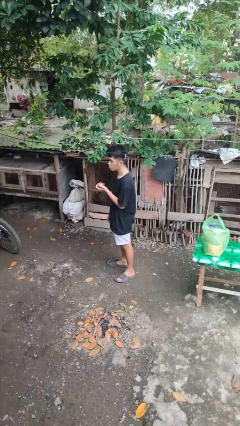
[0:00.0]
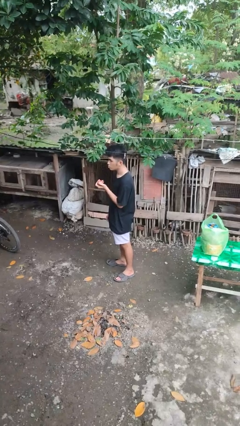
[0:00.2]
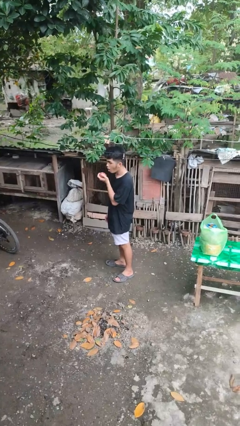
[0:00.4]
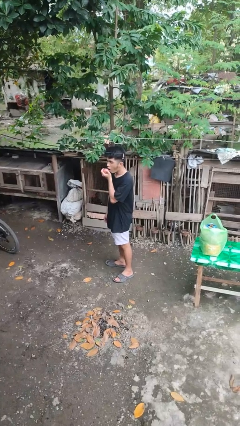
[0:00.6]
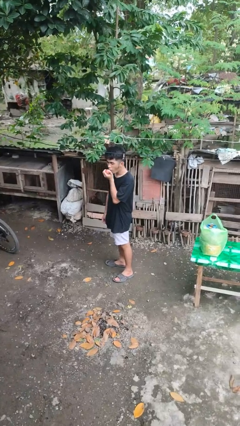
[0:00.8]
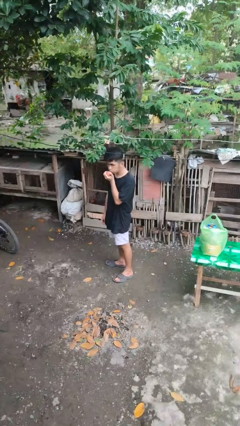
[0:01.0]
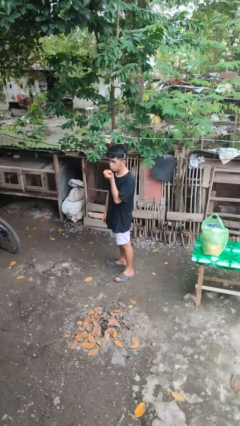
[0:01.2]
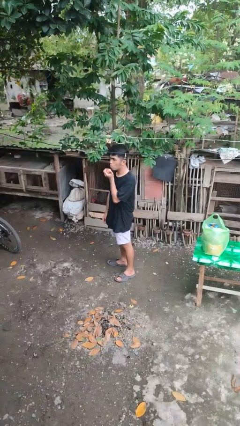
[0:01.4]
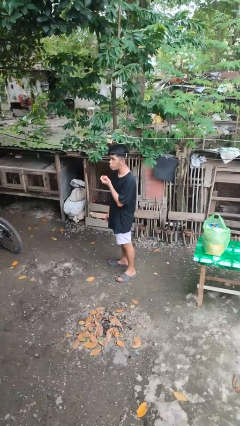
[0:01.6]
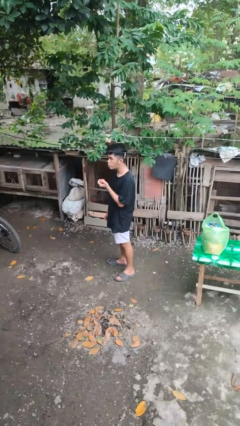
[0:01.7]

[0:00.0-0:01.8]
person eats apple

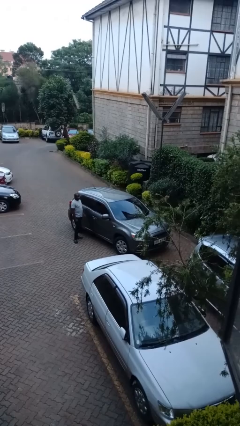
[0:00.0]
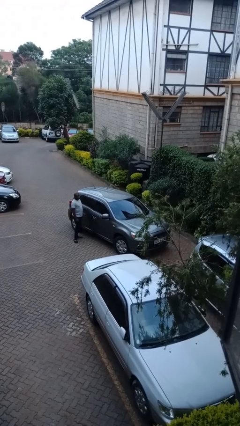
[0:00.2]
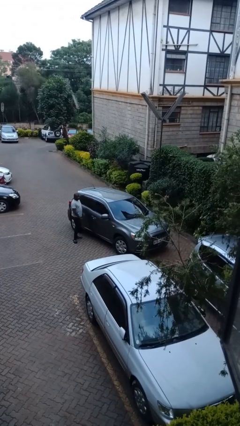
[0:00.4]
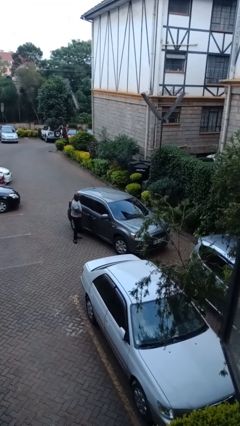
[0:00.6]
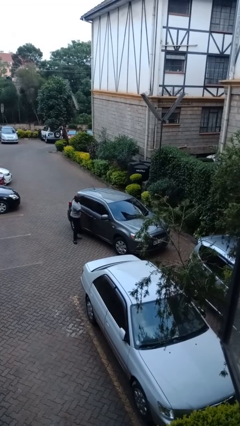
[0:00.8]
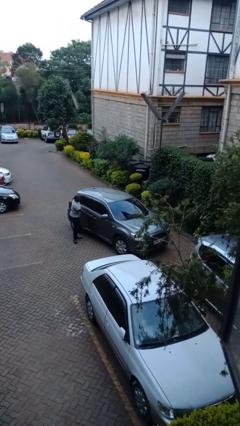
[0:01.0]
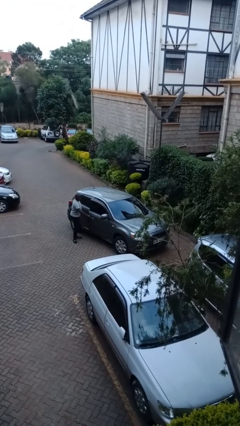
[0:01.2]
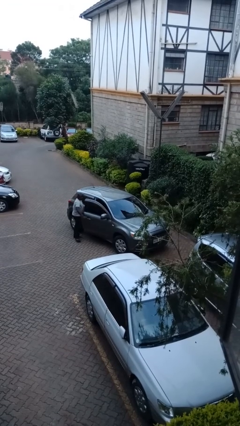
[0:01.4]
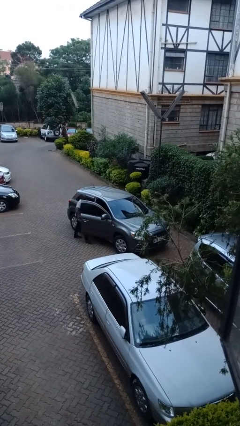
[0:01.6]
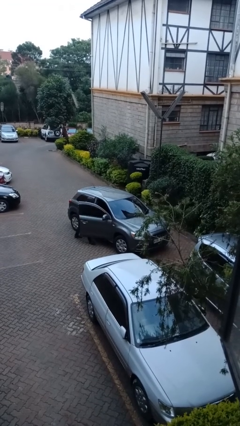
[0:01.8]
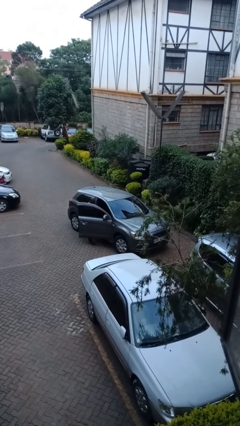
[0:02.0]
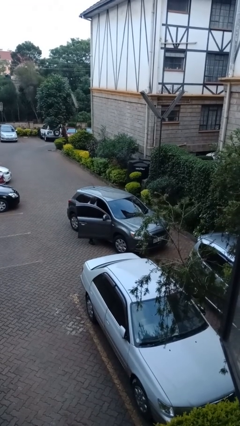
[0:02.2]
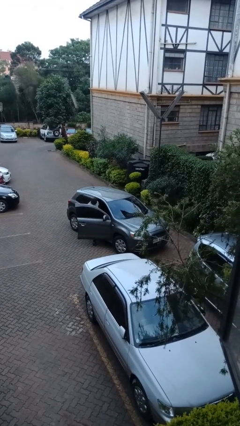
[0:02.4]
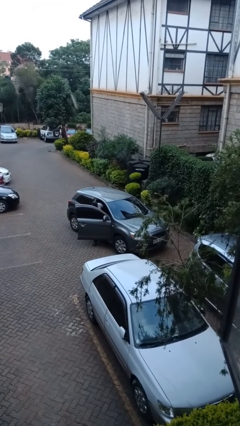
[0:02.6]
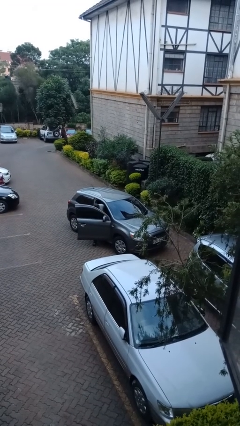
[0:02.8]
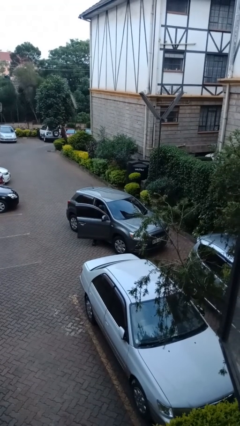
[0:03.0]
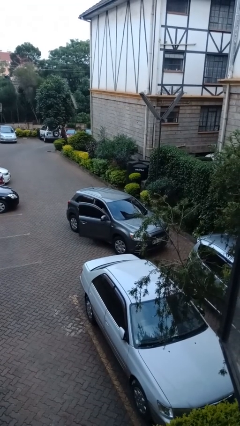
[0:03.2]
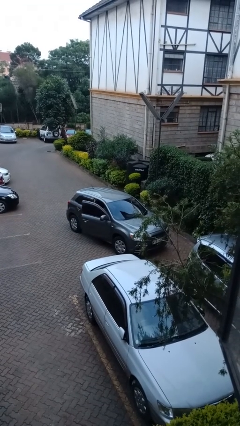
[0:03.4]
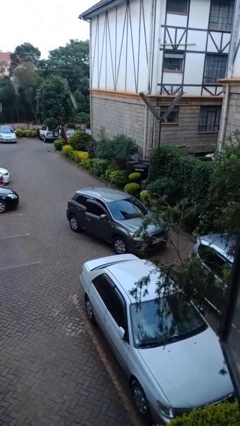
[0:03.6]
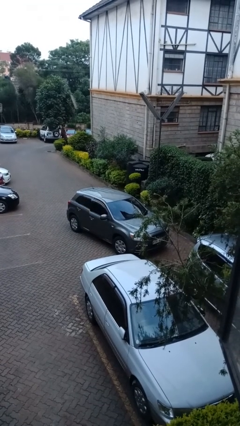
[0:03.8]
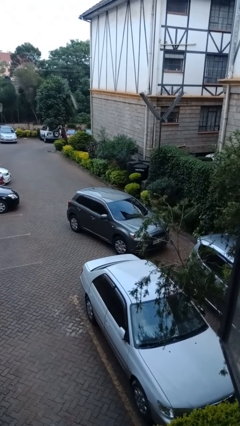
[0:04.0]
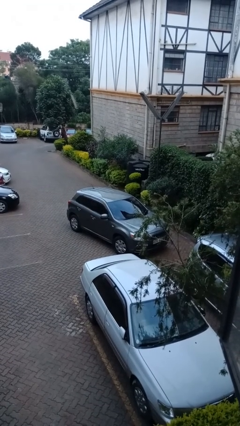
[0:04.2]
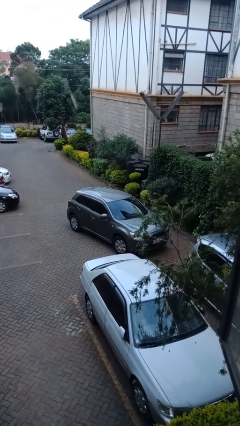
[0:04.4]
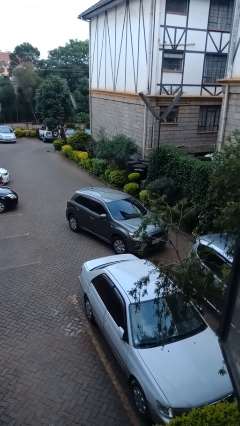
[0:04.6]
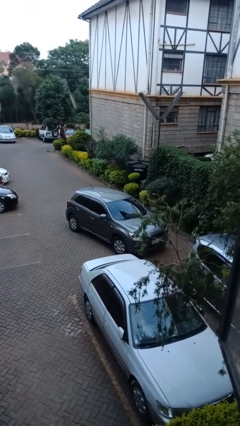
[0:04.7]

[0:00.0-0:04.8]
car picks up person

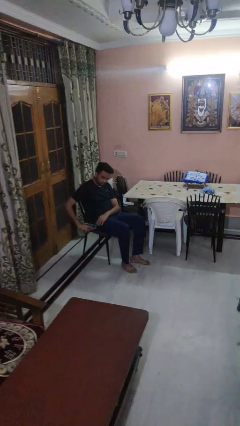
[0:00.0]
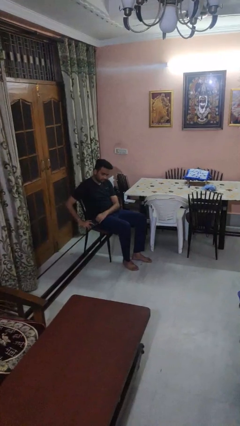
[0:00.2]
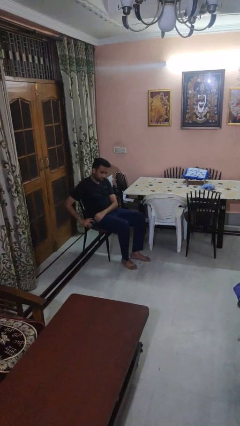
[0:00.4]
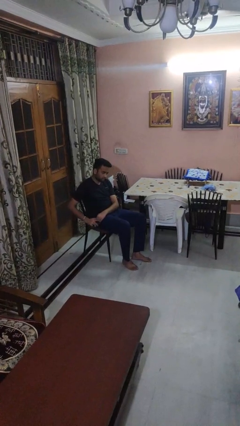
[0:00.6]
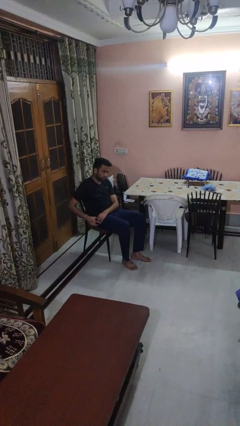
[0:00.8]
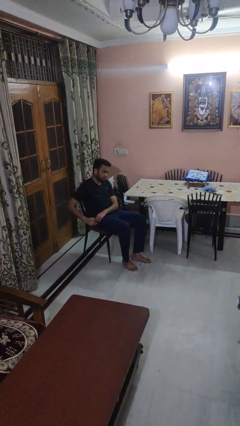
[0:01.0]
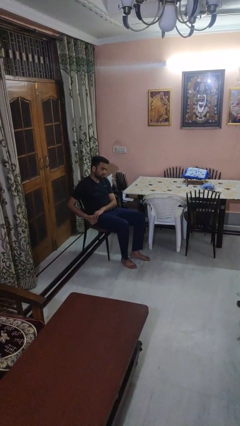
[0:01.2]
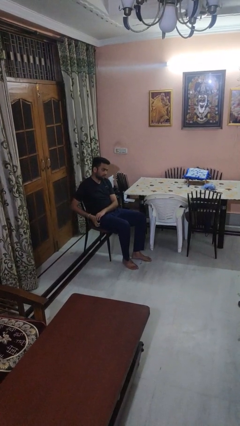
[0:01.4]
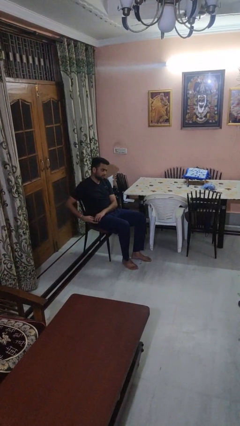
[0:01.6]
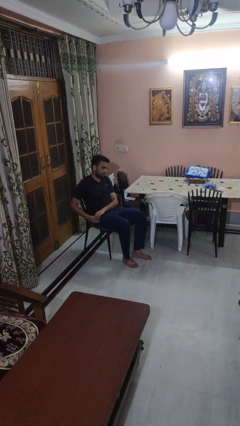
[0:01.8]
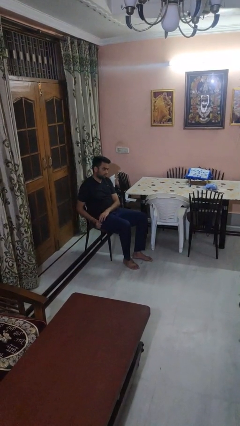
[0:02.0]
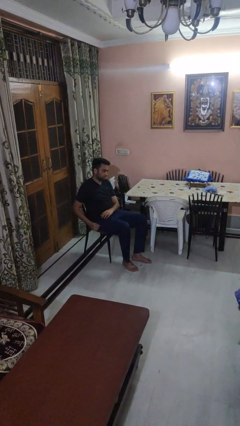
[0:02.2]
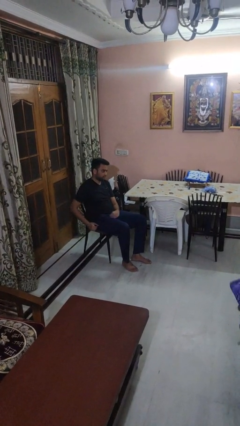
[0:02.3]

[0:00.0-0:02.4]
person puts phone into pocket

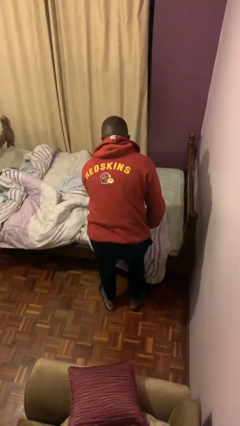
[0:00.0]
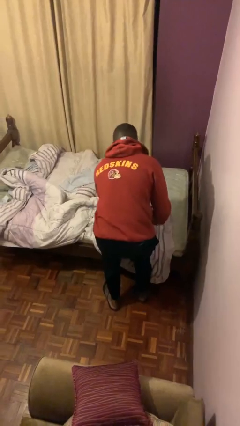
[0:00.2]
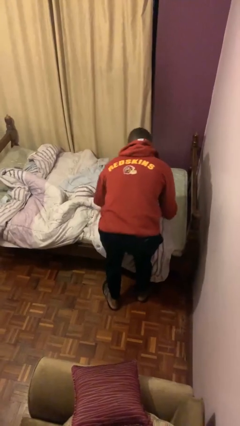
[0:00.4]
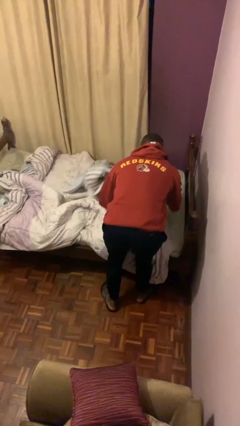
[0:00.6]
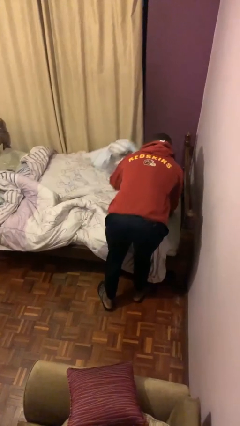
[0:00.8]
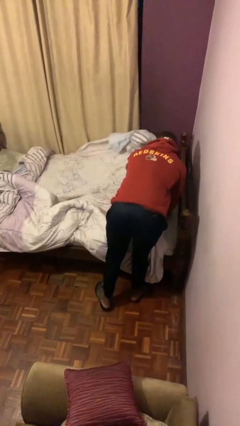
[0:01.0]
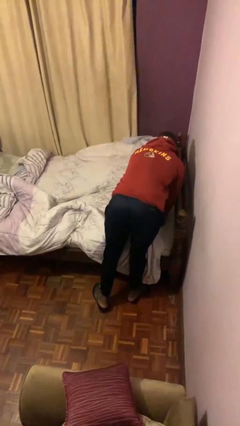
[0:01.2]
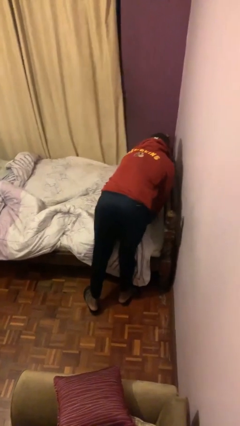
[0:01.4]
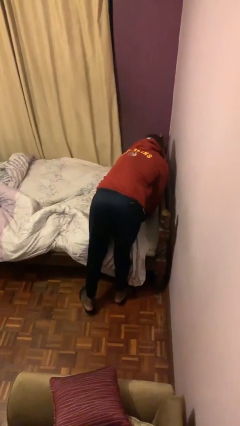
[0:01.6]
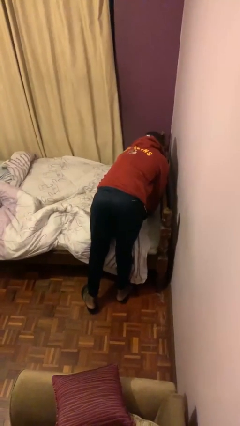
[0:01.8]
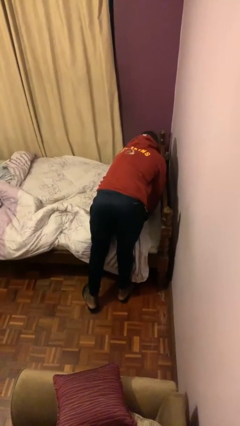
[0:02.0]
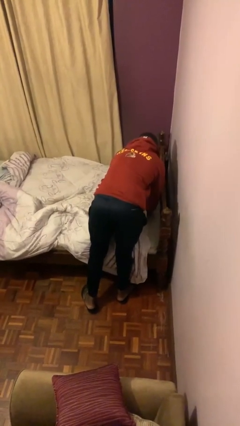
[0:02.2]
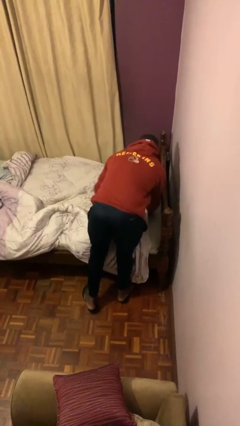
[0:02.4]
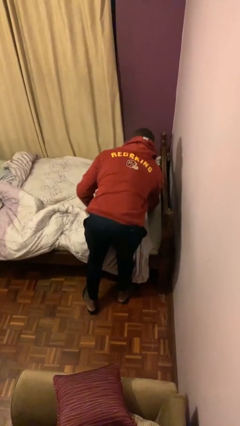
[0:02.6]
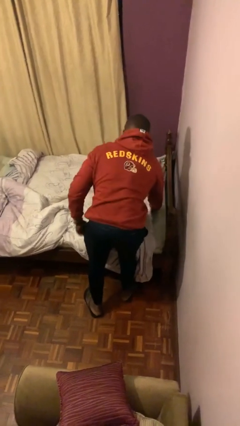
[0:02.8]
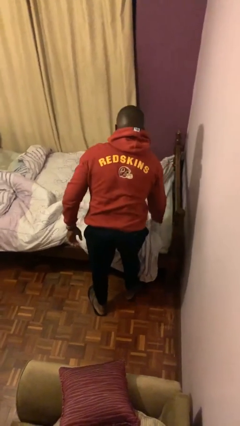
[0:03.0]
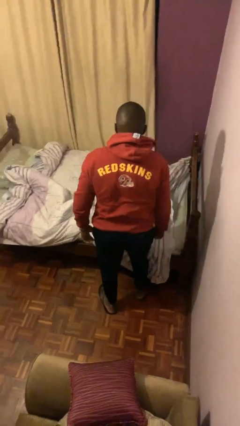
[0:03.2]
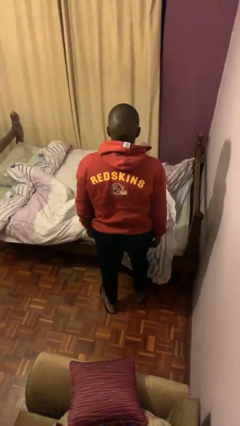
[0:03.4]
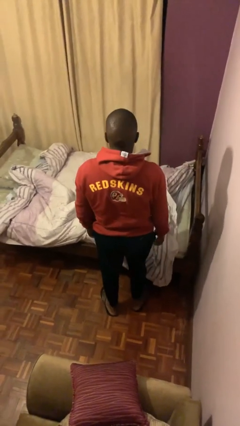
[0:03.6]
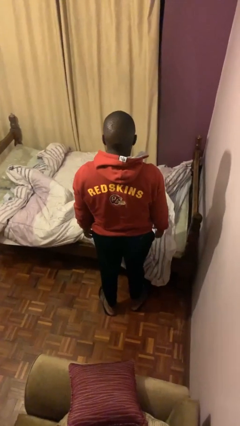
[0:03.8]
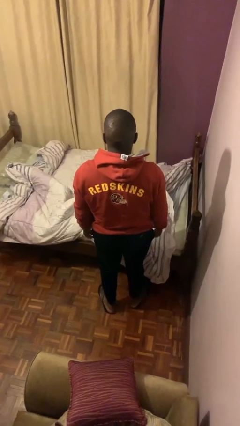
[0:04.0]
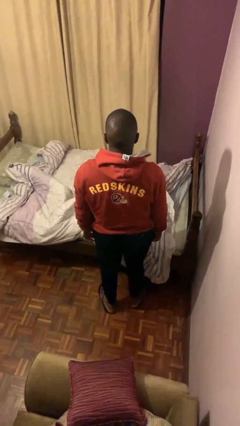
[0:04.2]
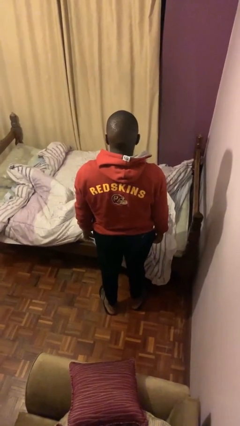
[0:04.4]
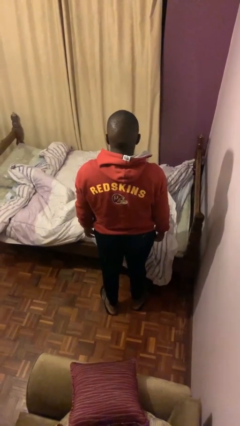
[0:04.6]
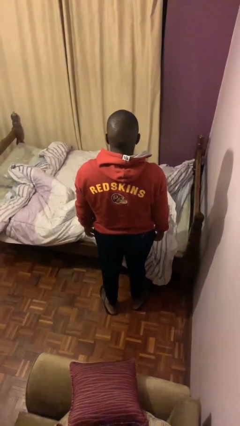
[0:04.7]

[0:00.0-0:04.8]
person makes bed

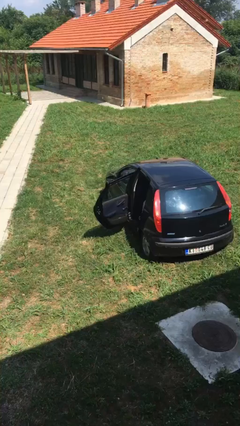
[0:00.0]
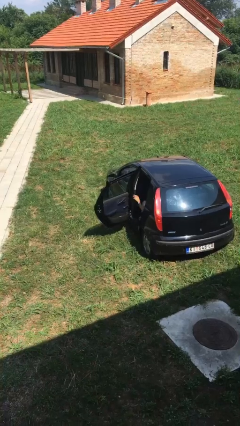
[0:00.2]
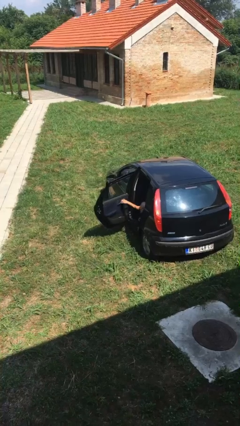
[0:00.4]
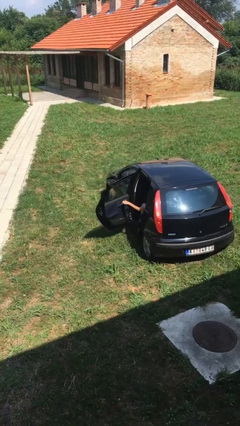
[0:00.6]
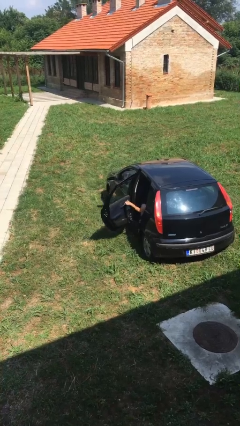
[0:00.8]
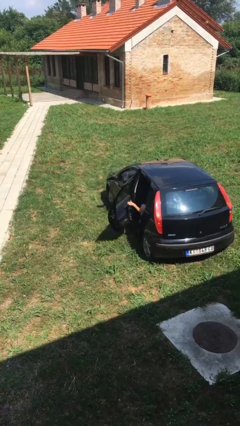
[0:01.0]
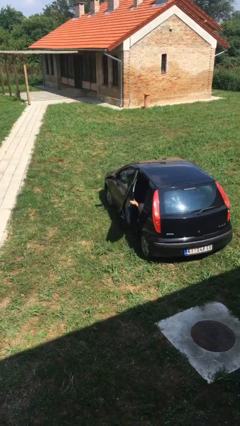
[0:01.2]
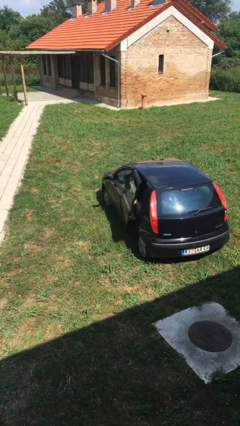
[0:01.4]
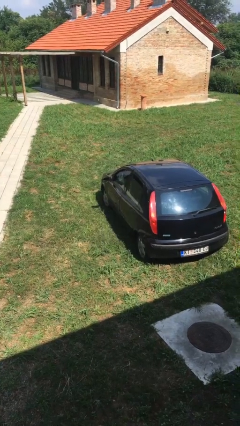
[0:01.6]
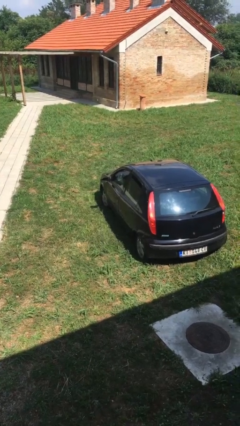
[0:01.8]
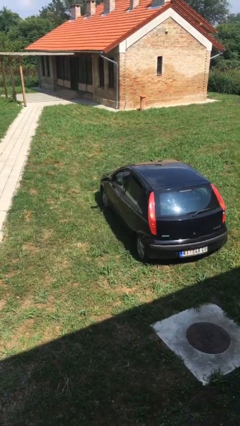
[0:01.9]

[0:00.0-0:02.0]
person closes car door

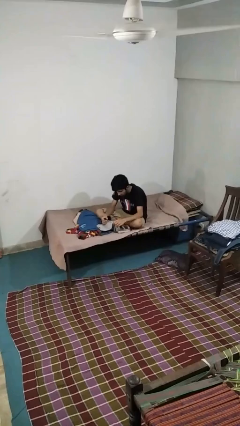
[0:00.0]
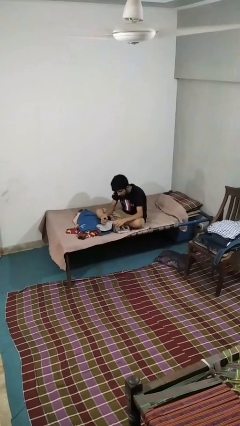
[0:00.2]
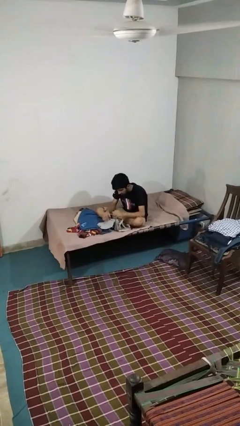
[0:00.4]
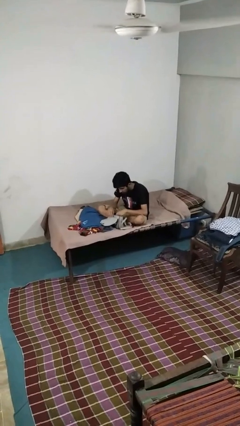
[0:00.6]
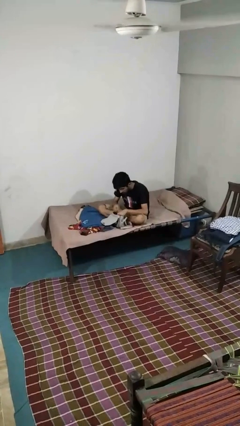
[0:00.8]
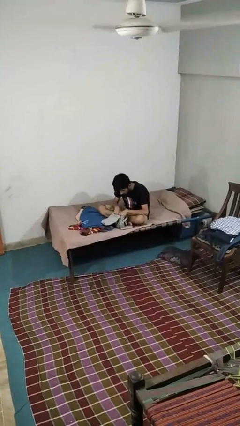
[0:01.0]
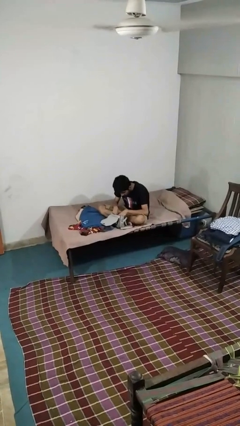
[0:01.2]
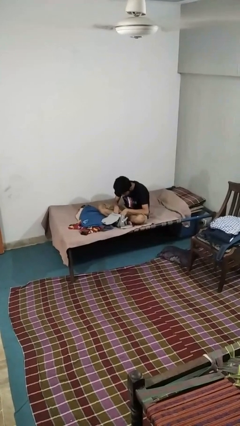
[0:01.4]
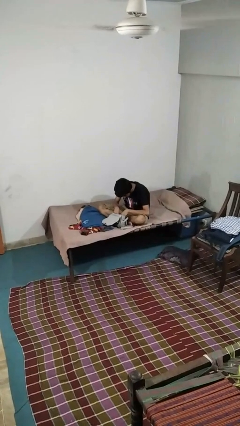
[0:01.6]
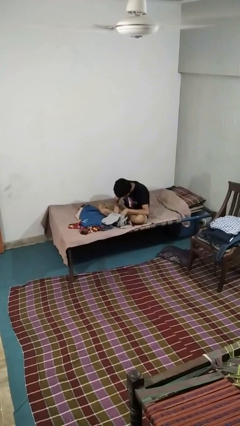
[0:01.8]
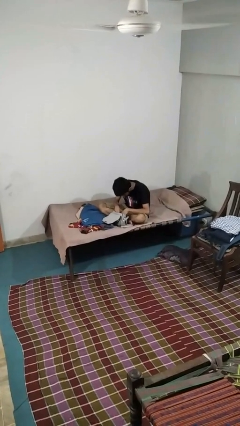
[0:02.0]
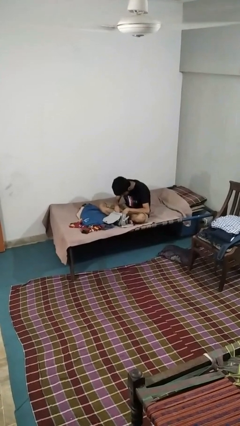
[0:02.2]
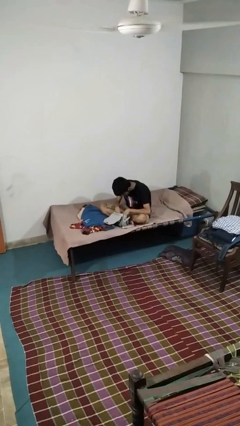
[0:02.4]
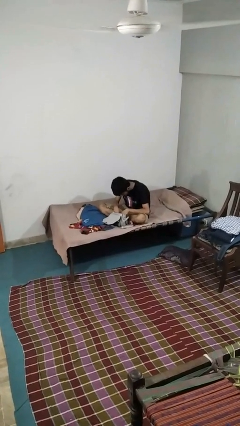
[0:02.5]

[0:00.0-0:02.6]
person searches in purse
